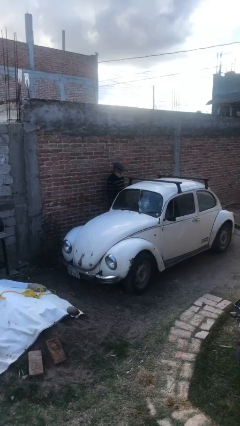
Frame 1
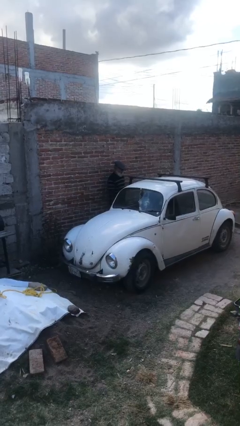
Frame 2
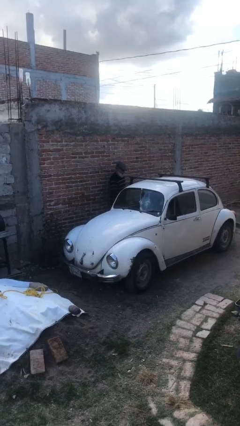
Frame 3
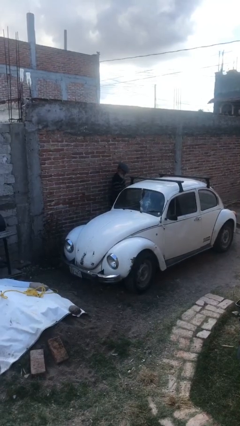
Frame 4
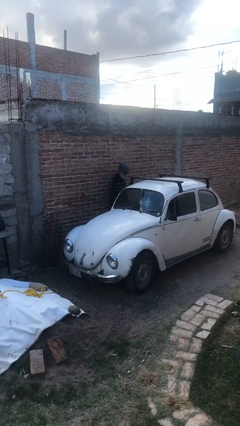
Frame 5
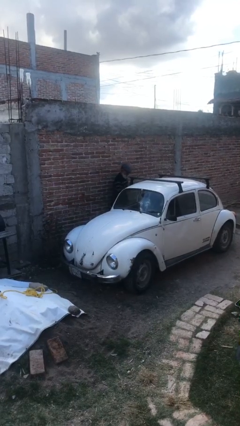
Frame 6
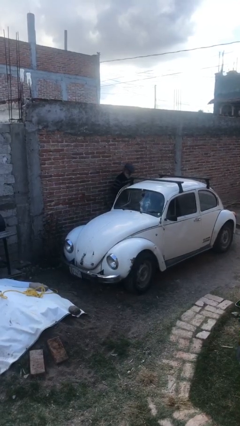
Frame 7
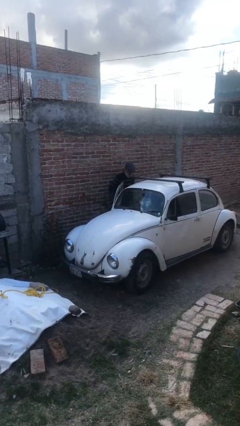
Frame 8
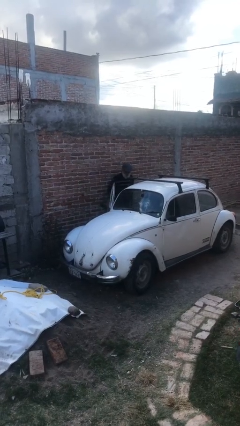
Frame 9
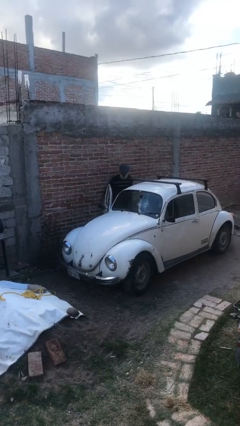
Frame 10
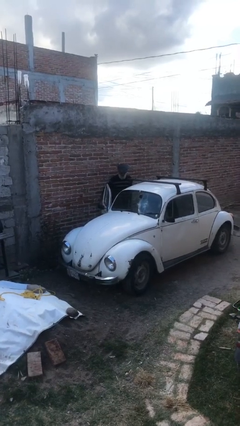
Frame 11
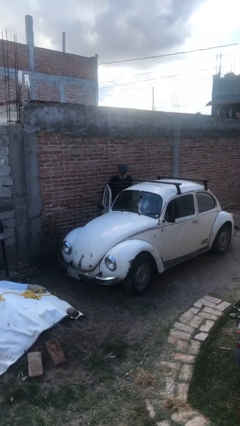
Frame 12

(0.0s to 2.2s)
person opens car door

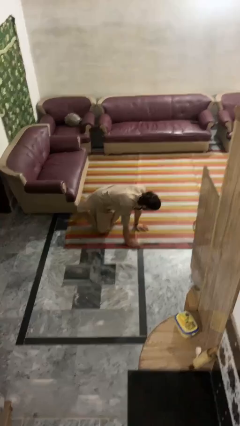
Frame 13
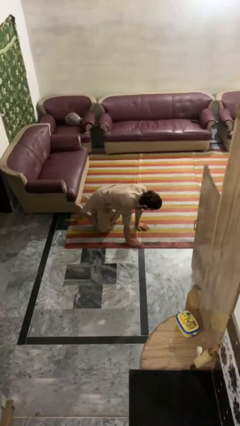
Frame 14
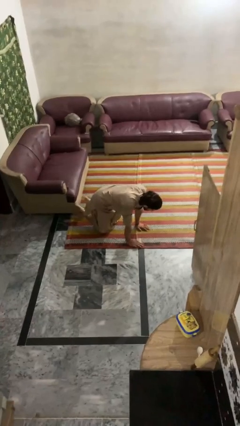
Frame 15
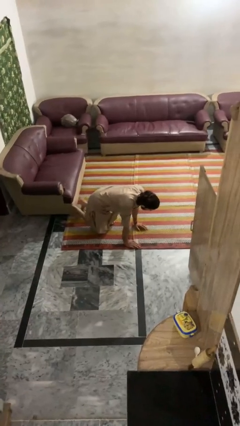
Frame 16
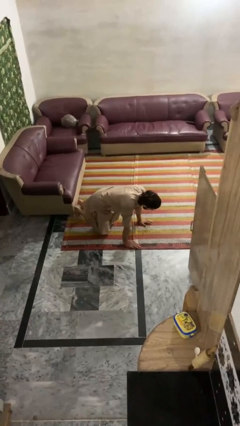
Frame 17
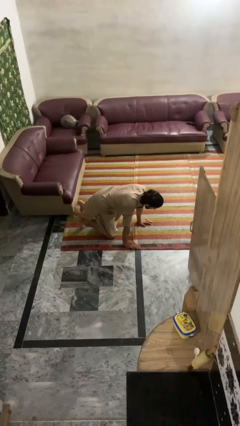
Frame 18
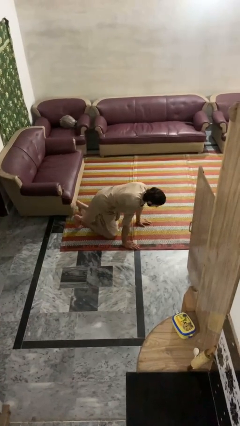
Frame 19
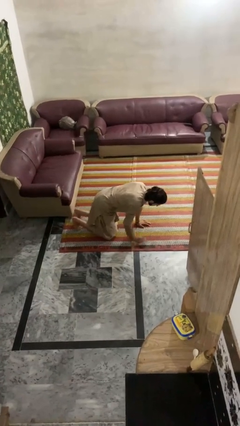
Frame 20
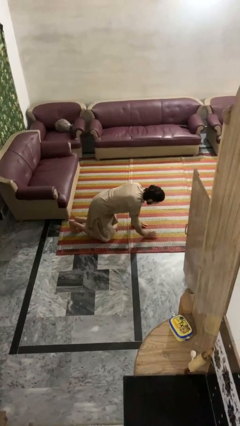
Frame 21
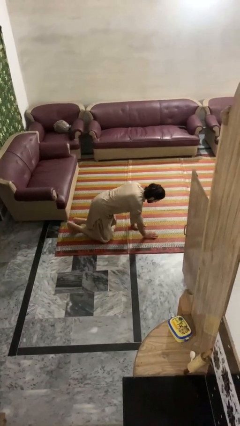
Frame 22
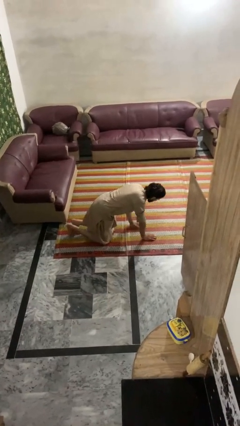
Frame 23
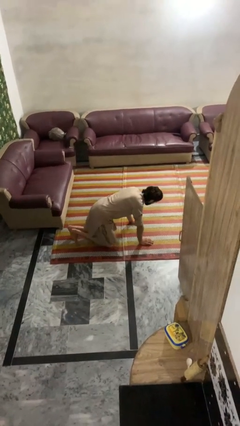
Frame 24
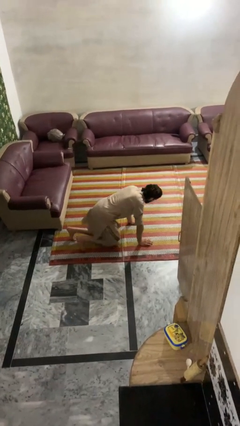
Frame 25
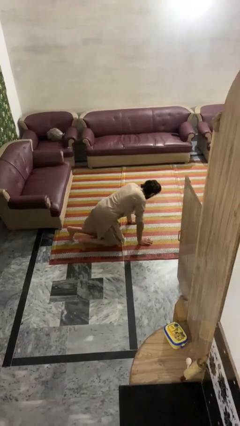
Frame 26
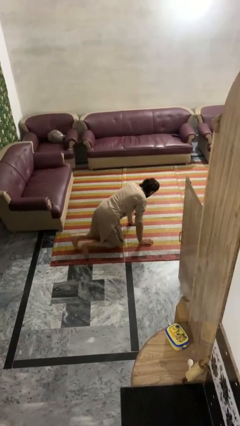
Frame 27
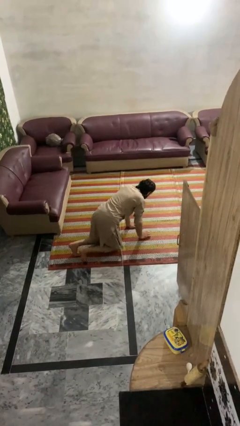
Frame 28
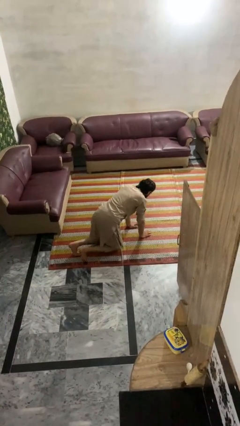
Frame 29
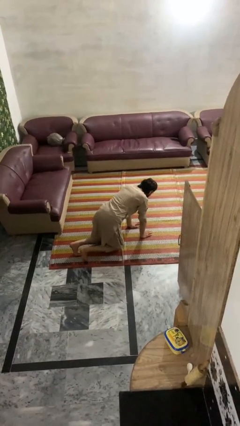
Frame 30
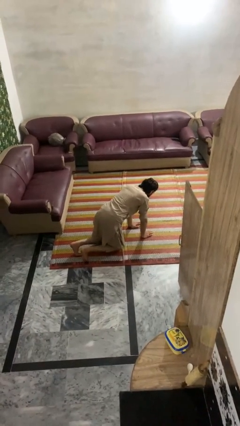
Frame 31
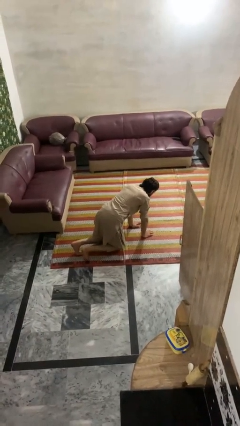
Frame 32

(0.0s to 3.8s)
person crawls

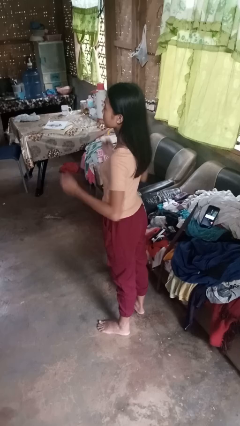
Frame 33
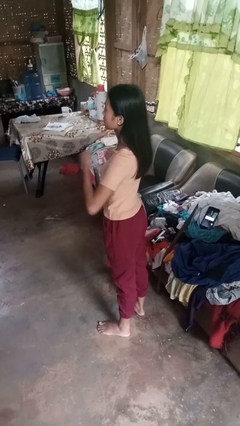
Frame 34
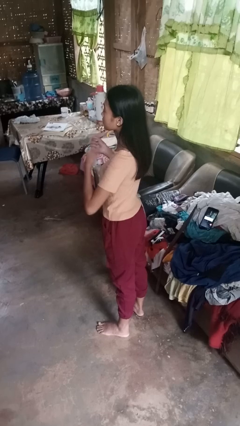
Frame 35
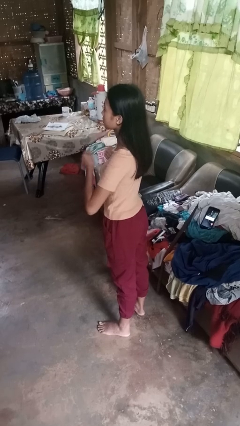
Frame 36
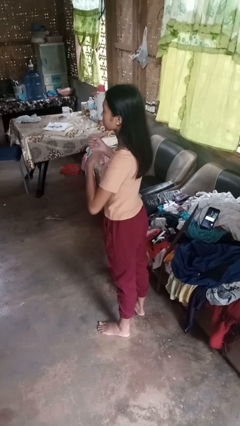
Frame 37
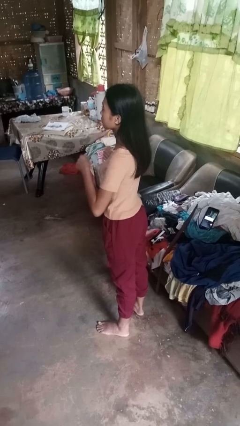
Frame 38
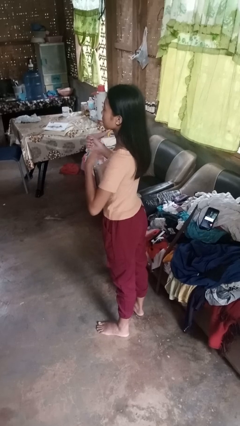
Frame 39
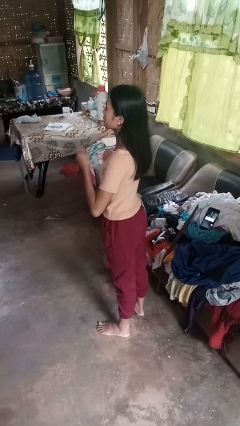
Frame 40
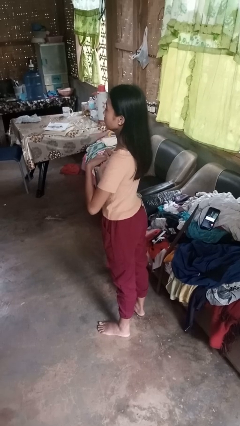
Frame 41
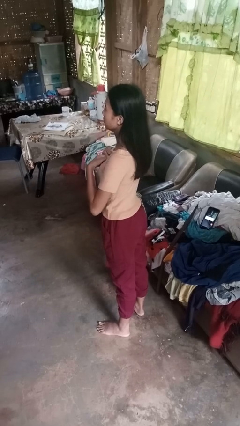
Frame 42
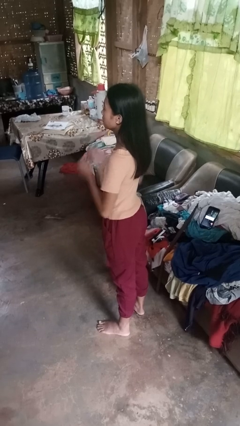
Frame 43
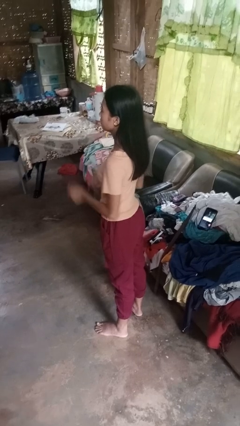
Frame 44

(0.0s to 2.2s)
person drums on chest

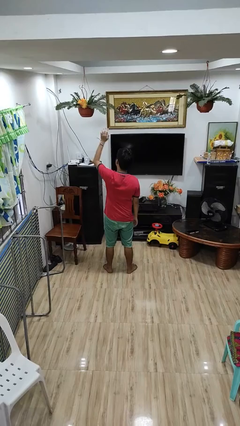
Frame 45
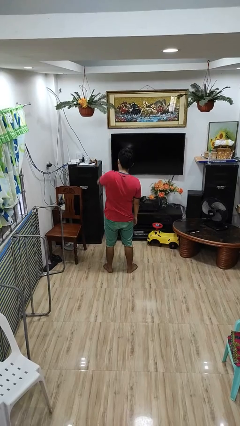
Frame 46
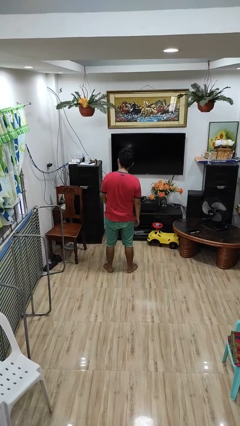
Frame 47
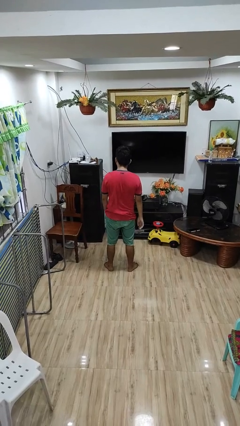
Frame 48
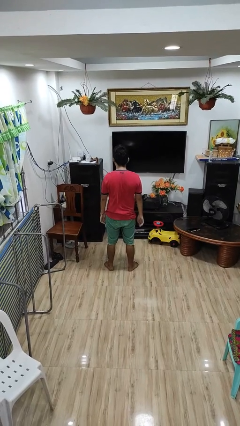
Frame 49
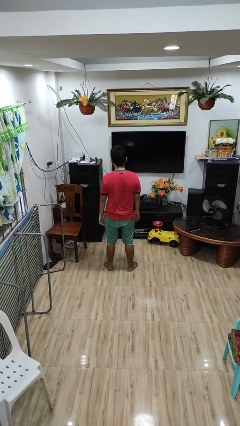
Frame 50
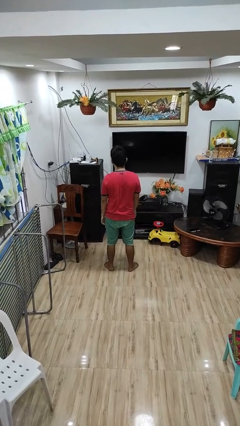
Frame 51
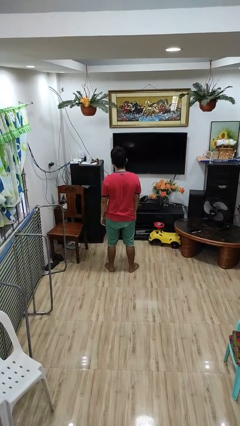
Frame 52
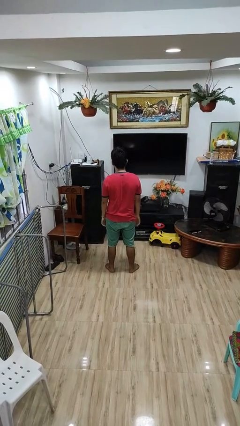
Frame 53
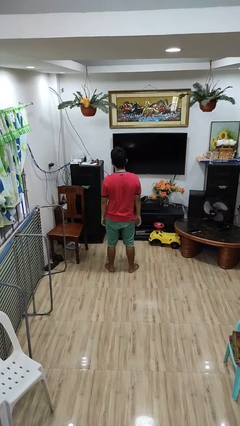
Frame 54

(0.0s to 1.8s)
person gestures swipe down

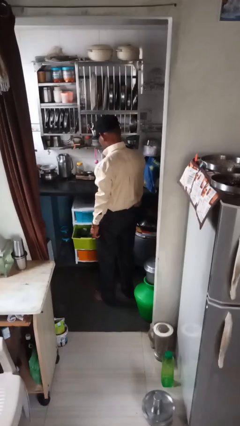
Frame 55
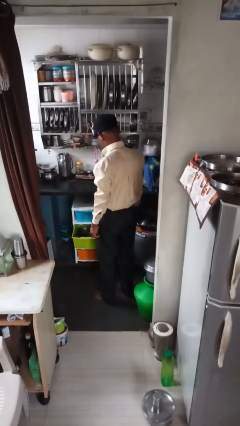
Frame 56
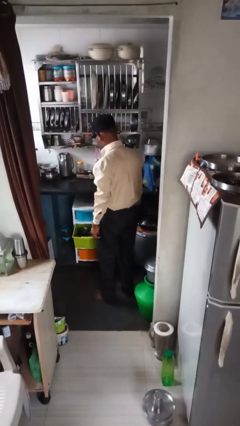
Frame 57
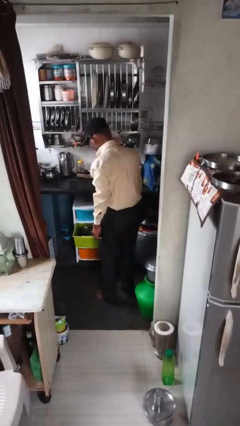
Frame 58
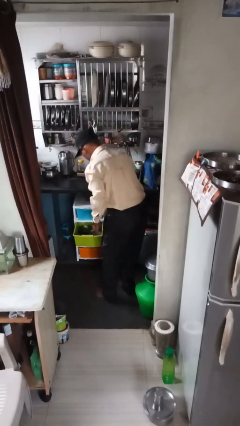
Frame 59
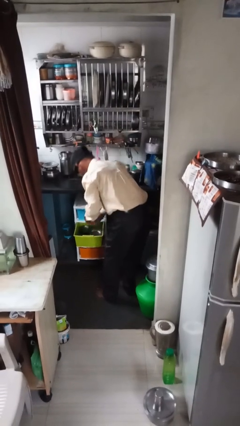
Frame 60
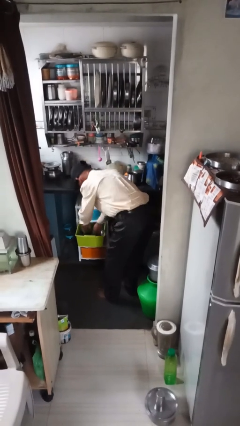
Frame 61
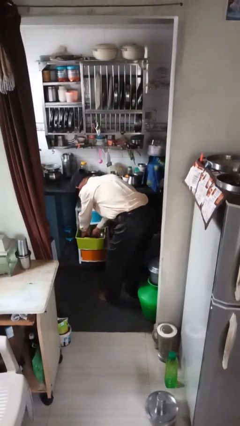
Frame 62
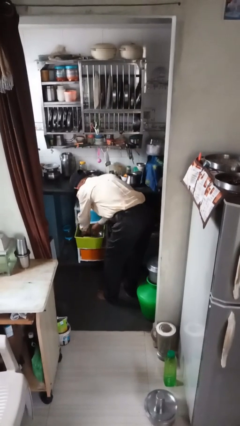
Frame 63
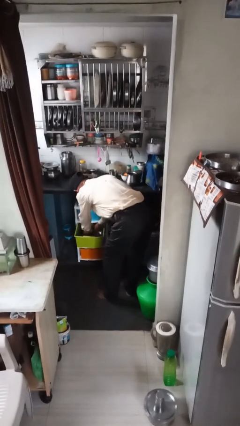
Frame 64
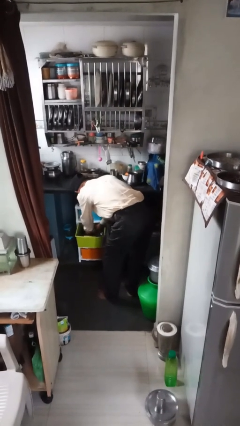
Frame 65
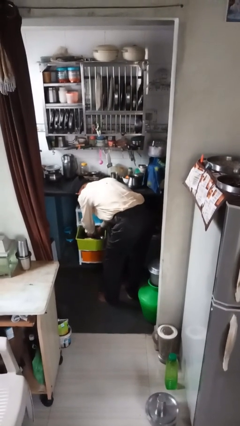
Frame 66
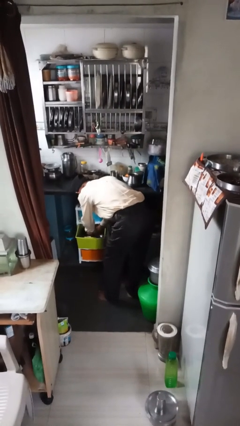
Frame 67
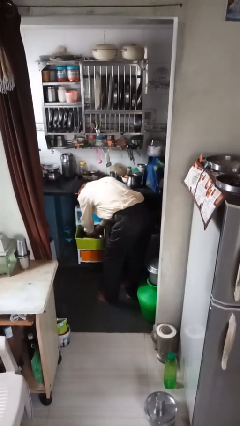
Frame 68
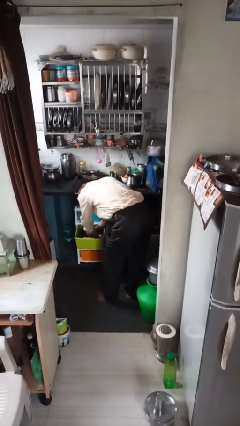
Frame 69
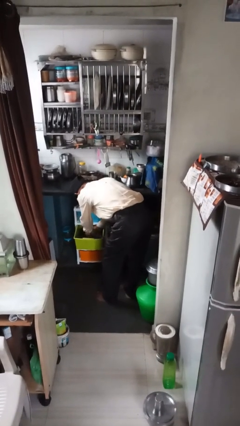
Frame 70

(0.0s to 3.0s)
person searches in kitchen drawer

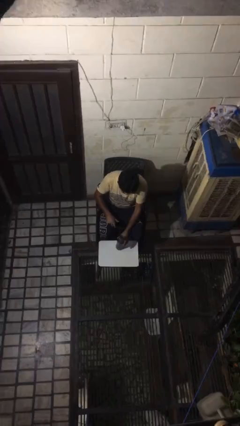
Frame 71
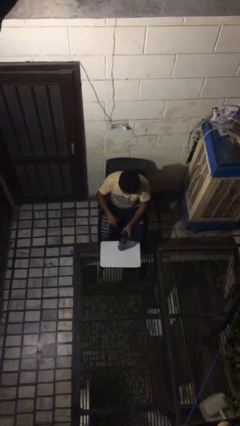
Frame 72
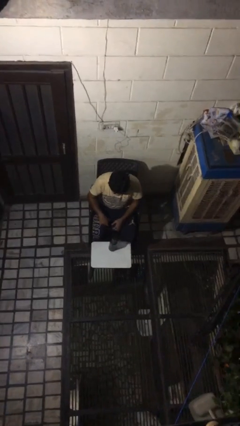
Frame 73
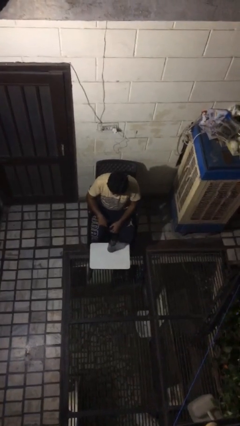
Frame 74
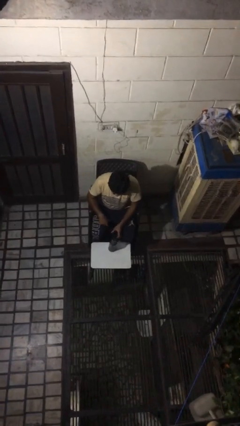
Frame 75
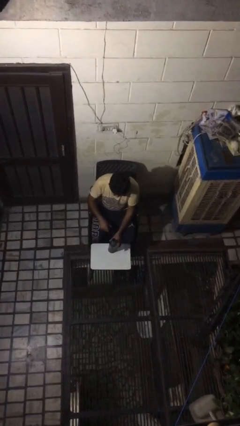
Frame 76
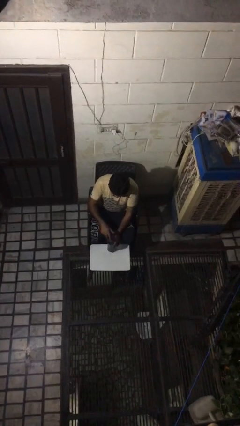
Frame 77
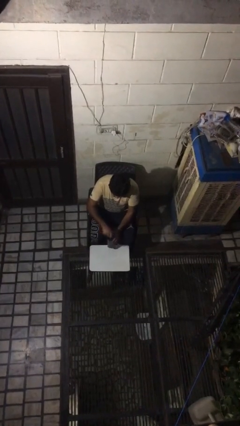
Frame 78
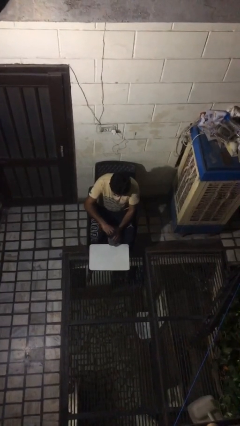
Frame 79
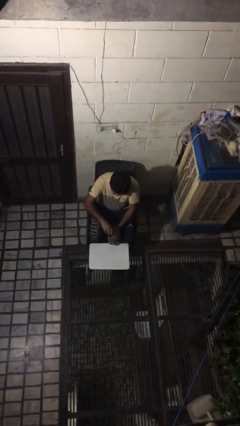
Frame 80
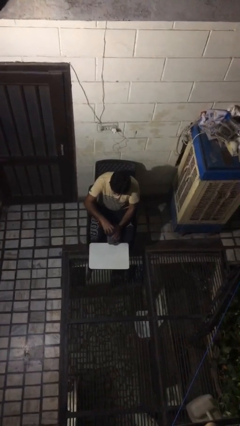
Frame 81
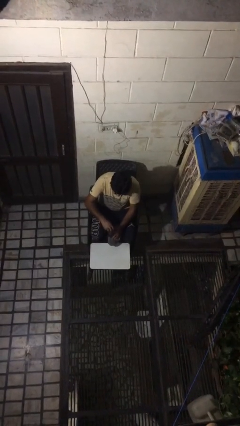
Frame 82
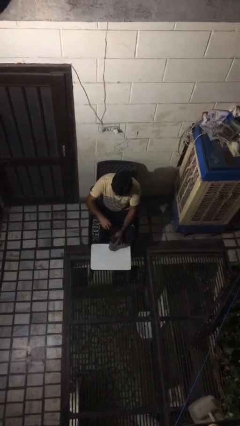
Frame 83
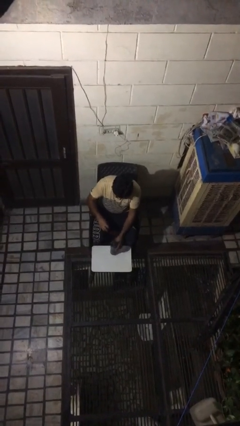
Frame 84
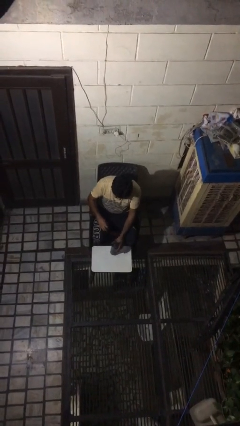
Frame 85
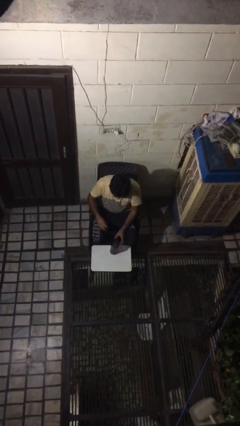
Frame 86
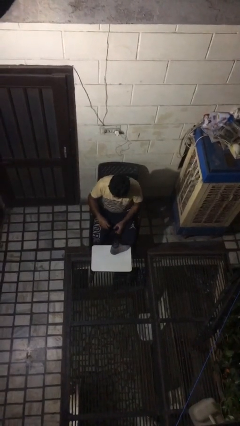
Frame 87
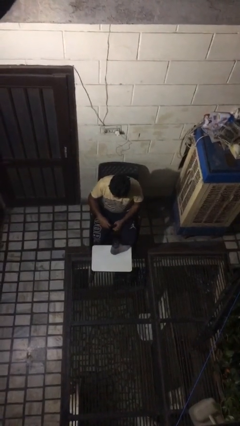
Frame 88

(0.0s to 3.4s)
person unscrews lid from bottle

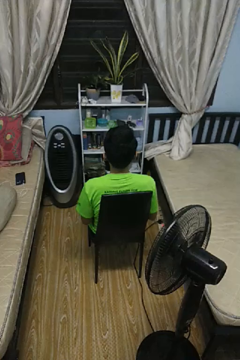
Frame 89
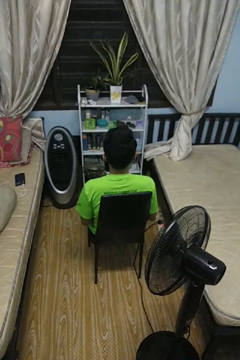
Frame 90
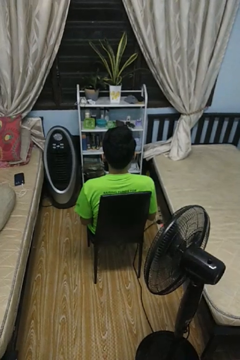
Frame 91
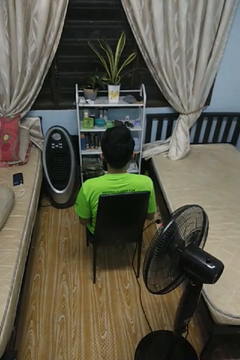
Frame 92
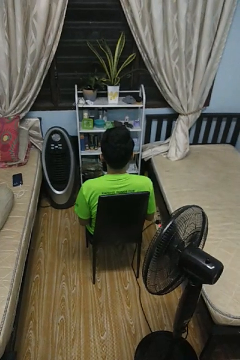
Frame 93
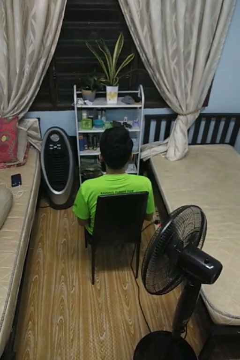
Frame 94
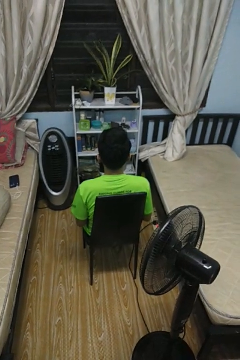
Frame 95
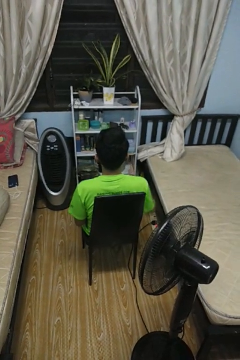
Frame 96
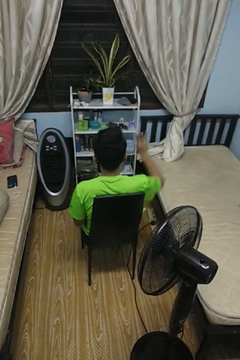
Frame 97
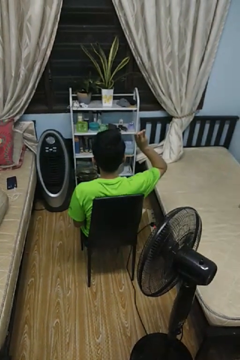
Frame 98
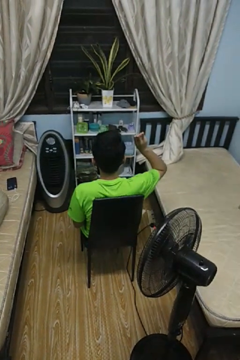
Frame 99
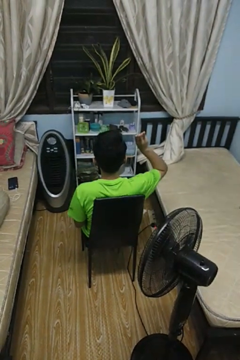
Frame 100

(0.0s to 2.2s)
person gestures number three
